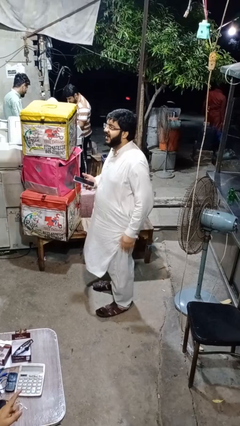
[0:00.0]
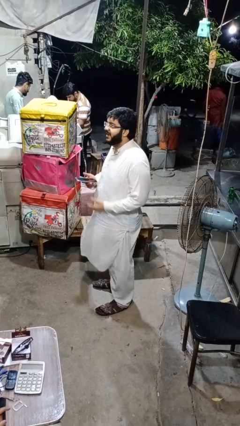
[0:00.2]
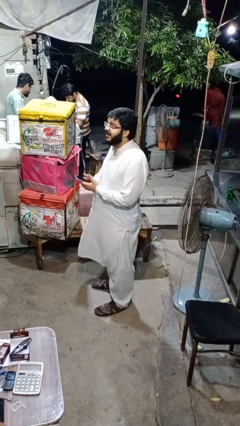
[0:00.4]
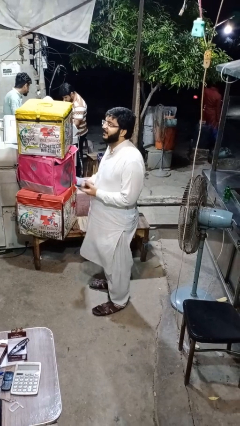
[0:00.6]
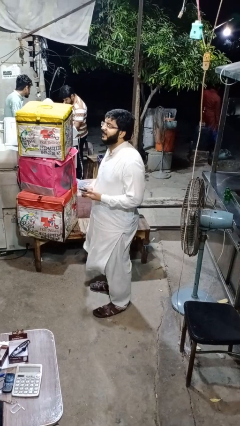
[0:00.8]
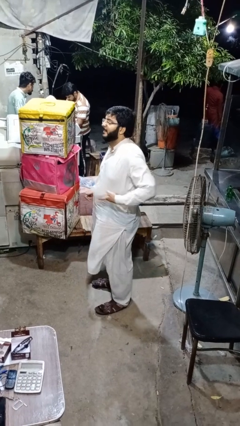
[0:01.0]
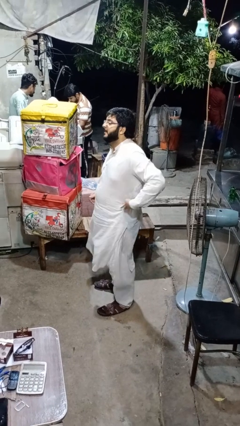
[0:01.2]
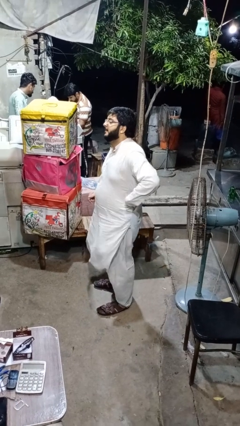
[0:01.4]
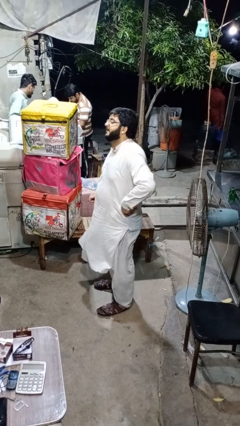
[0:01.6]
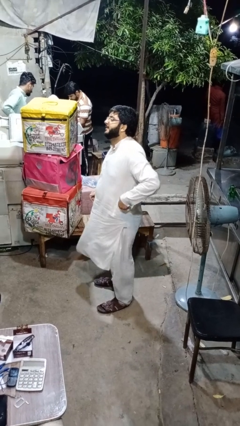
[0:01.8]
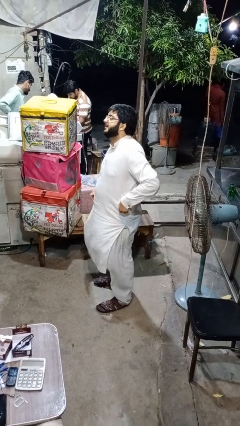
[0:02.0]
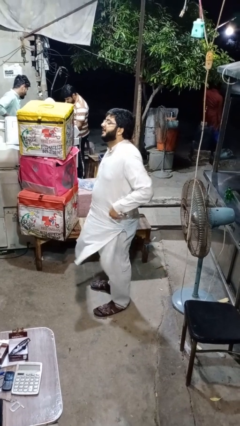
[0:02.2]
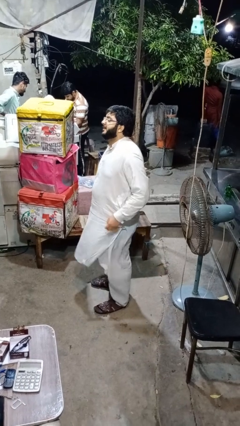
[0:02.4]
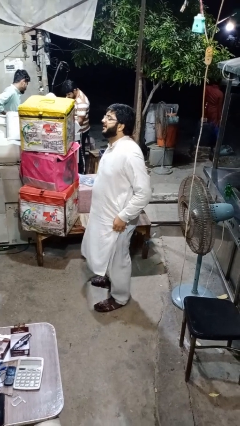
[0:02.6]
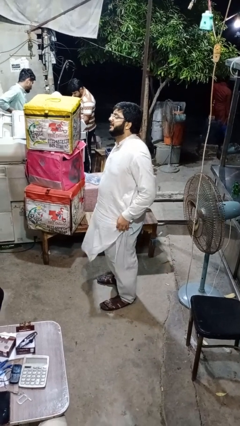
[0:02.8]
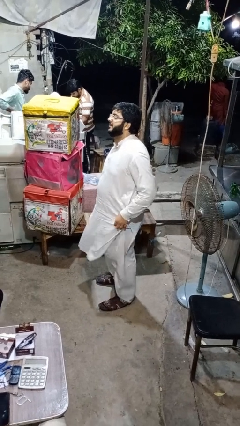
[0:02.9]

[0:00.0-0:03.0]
person puts phone into pocket

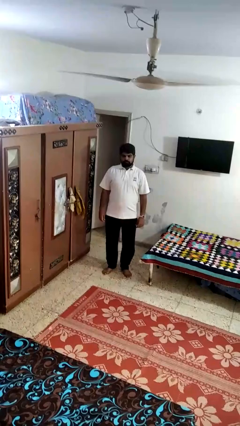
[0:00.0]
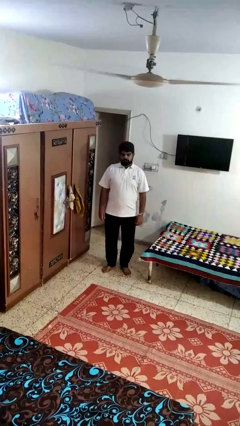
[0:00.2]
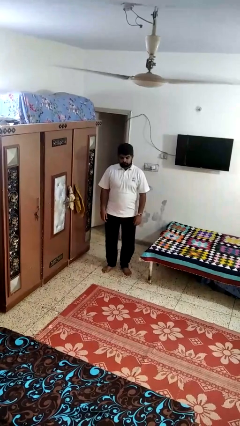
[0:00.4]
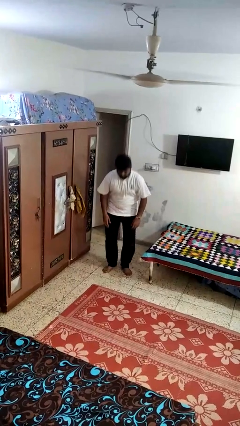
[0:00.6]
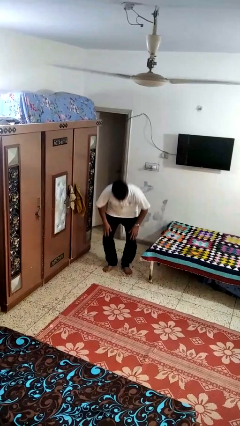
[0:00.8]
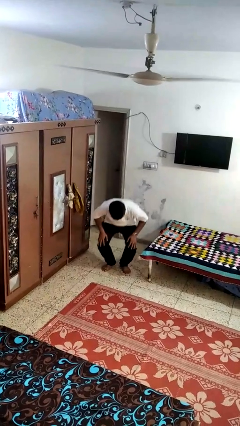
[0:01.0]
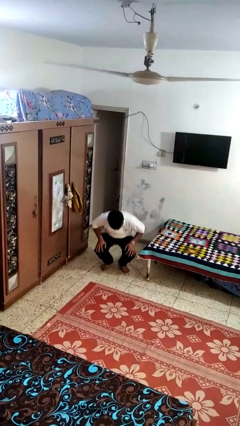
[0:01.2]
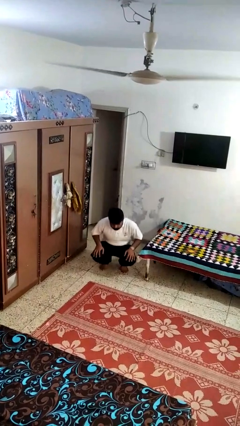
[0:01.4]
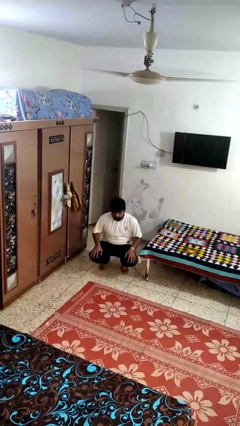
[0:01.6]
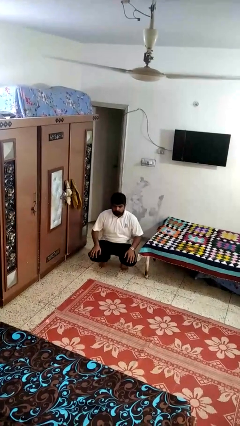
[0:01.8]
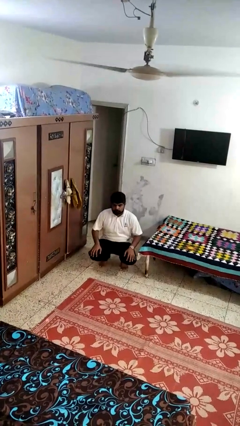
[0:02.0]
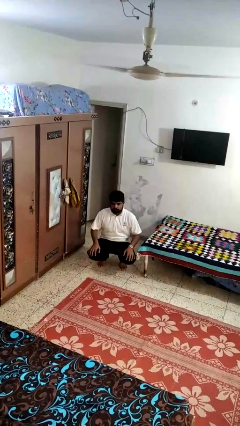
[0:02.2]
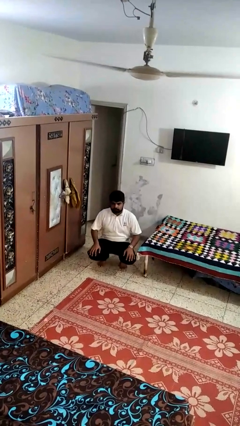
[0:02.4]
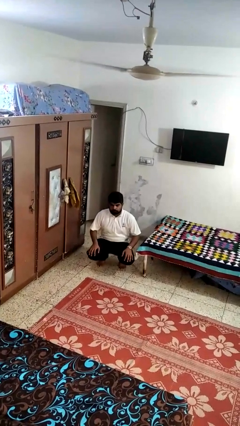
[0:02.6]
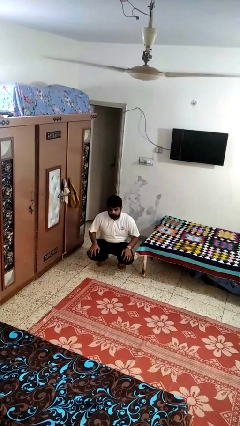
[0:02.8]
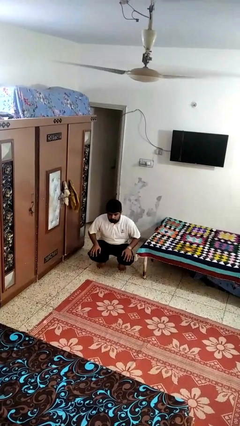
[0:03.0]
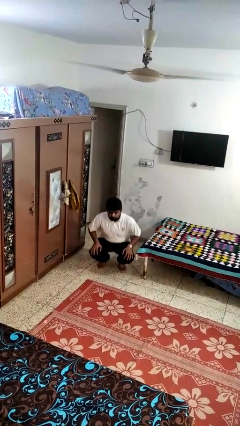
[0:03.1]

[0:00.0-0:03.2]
person squats

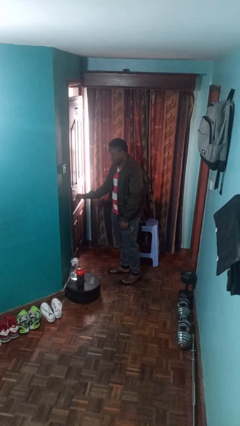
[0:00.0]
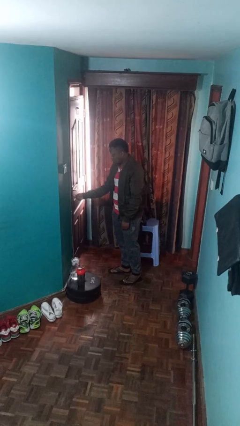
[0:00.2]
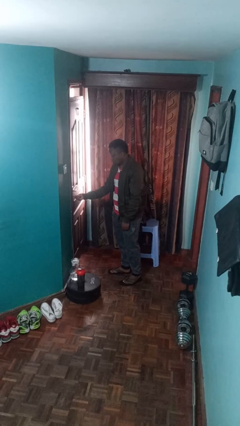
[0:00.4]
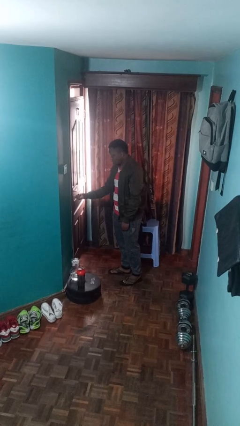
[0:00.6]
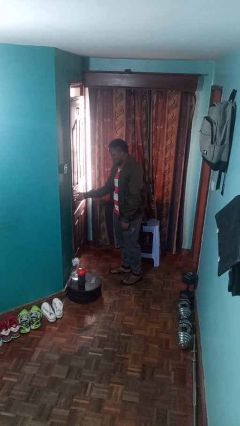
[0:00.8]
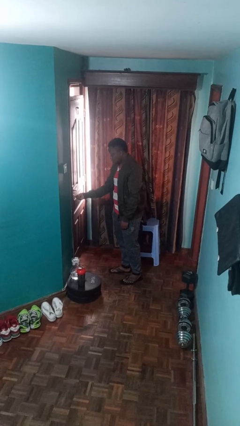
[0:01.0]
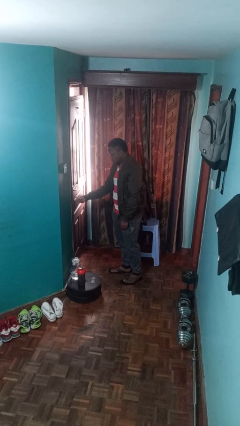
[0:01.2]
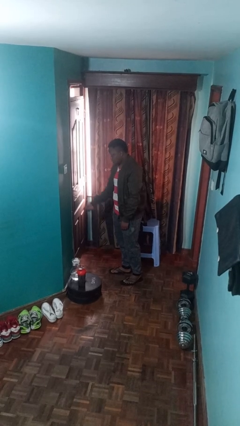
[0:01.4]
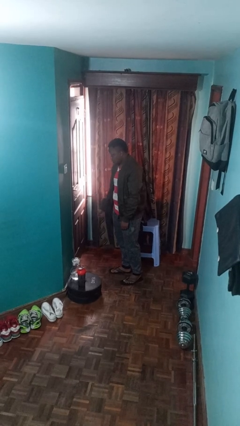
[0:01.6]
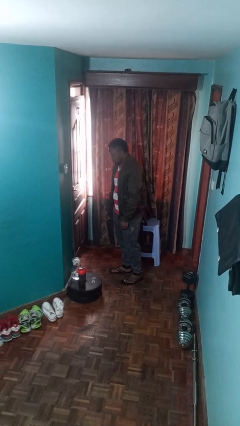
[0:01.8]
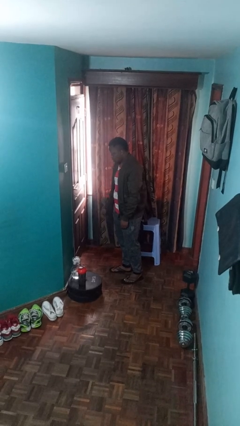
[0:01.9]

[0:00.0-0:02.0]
person unlocks door with keys

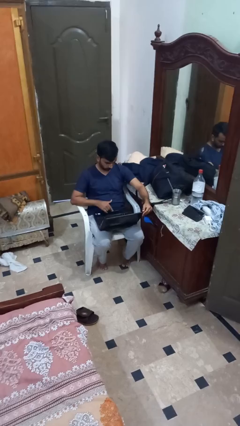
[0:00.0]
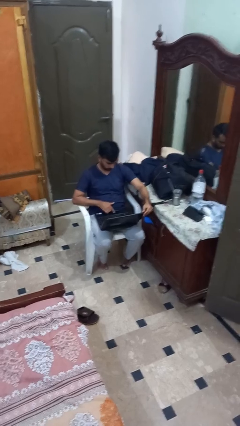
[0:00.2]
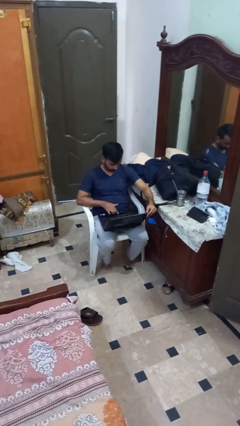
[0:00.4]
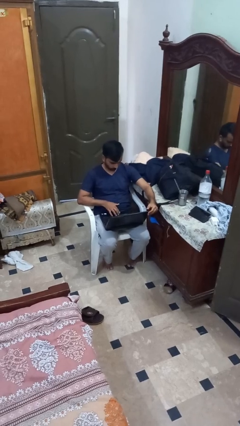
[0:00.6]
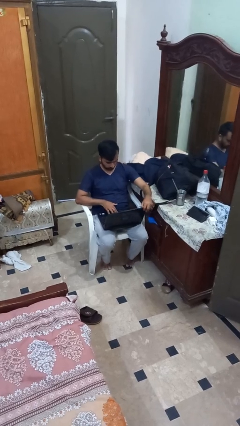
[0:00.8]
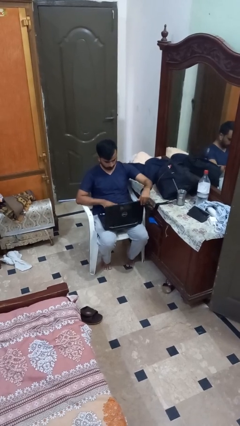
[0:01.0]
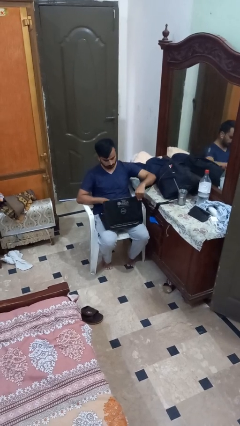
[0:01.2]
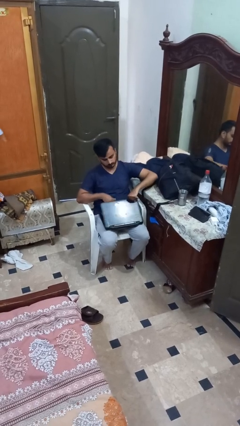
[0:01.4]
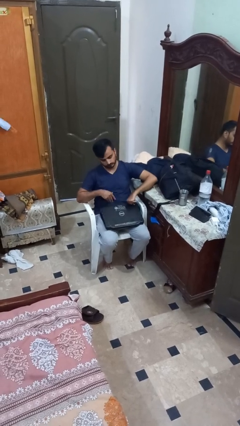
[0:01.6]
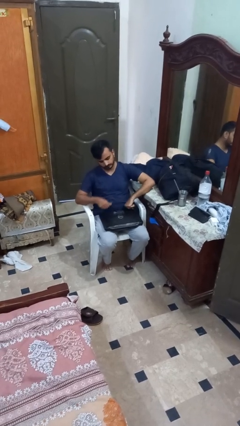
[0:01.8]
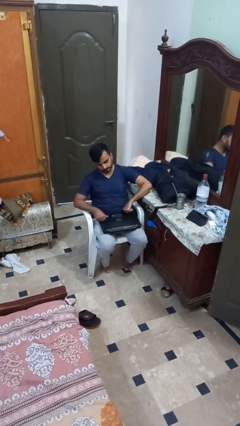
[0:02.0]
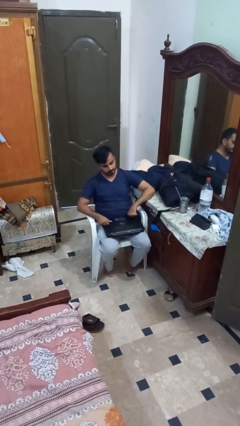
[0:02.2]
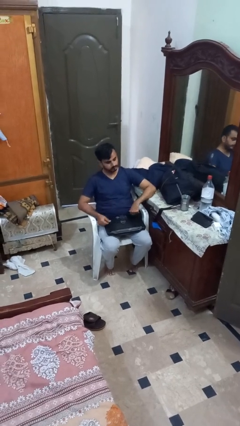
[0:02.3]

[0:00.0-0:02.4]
person closes laptop

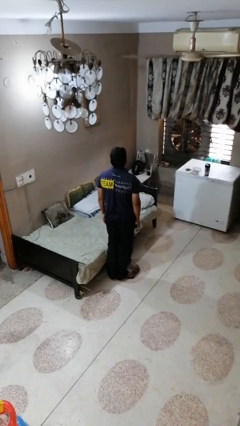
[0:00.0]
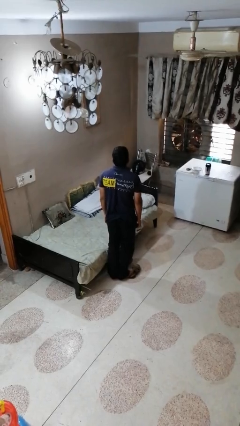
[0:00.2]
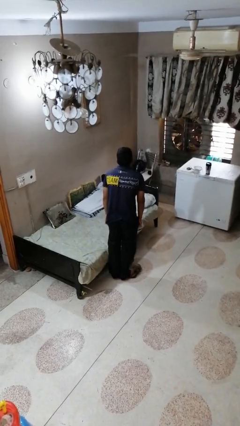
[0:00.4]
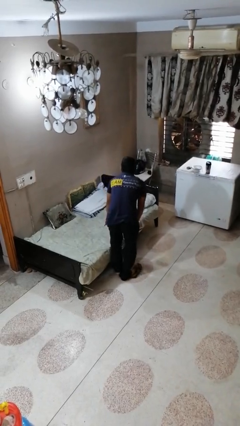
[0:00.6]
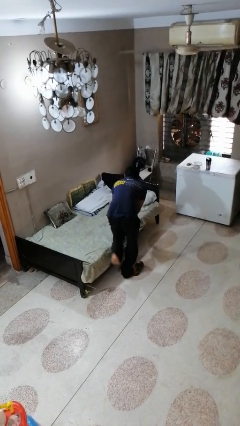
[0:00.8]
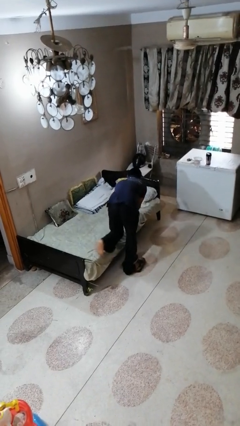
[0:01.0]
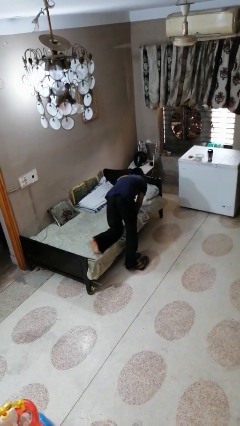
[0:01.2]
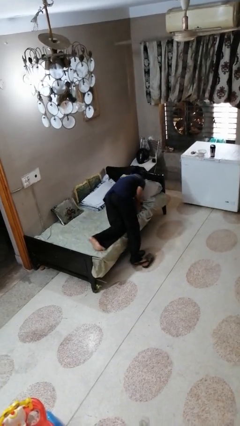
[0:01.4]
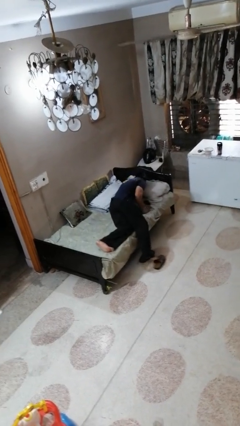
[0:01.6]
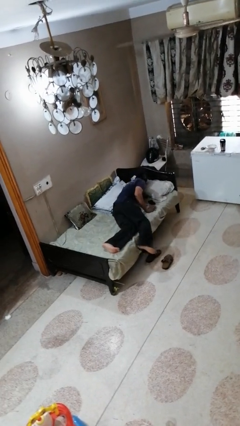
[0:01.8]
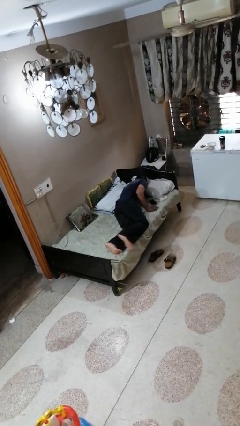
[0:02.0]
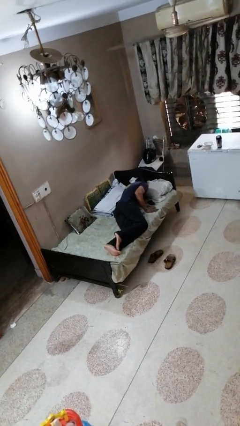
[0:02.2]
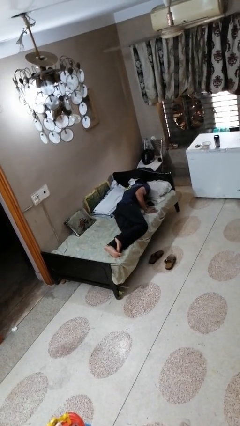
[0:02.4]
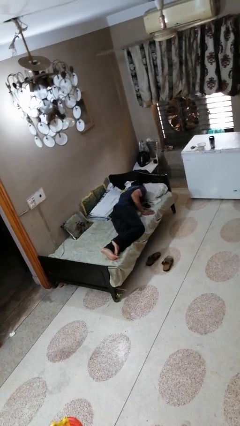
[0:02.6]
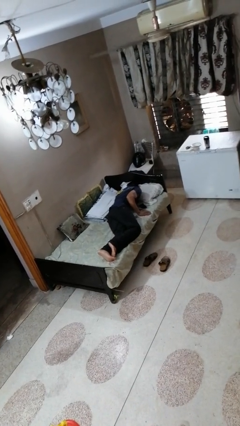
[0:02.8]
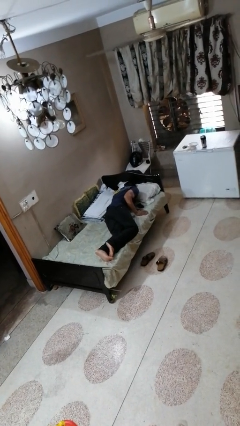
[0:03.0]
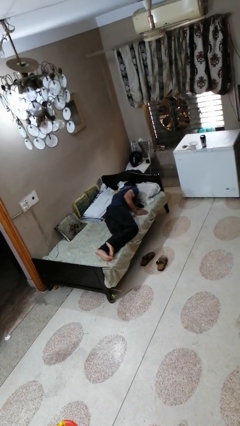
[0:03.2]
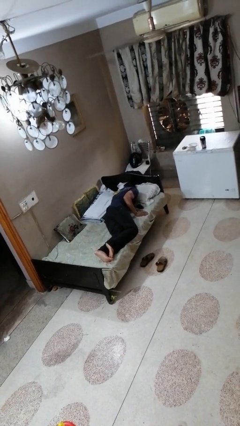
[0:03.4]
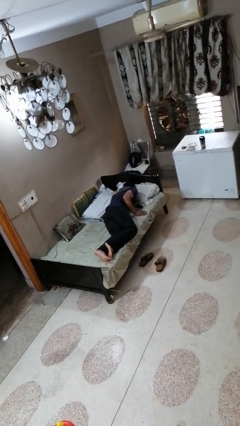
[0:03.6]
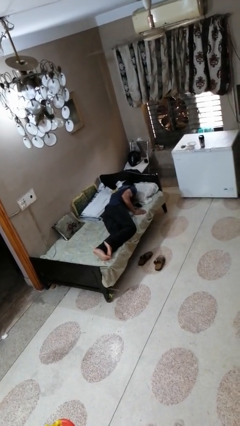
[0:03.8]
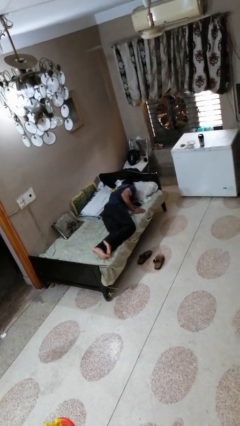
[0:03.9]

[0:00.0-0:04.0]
person lies down on bed

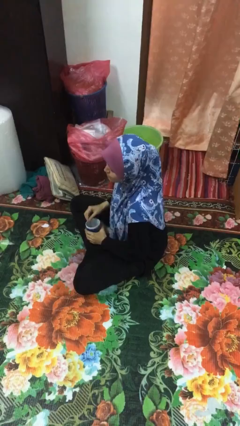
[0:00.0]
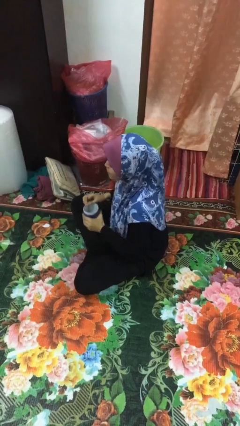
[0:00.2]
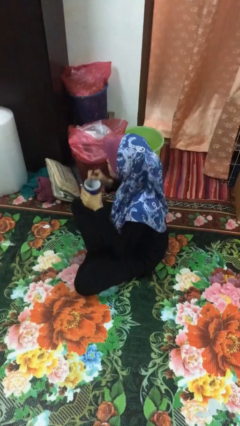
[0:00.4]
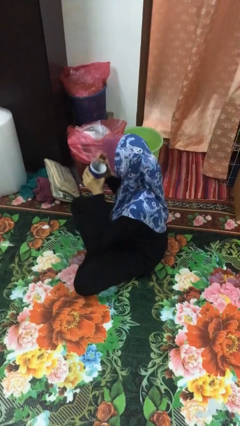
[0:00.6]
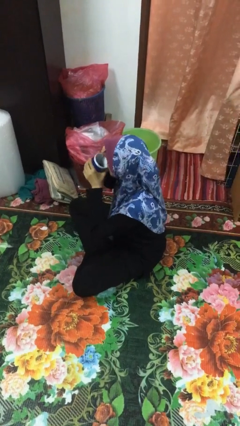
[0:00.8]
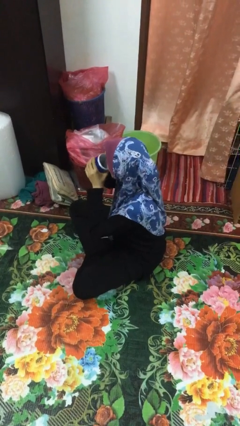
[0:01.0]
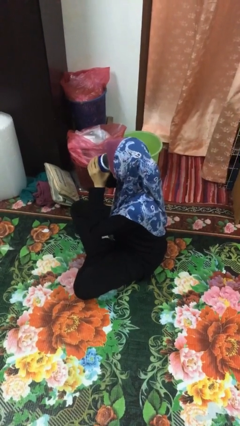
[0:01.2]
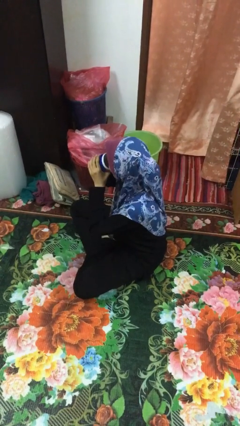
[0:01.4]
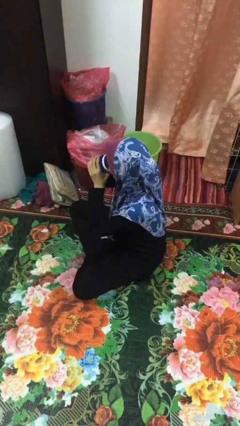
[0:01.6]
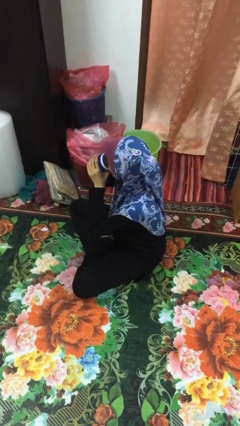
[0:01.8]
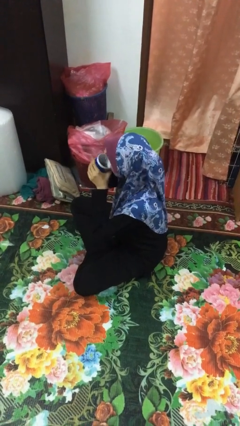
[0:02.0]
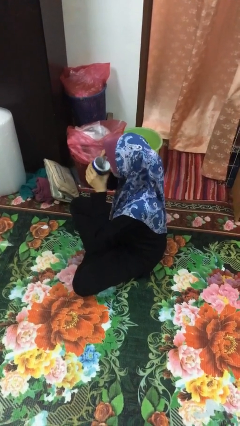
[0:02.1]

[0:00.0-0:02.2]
person drinks from mug
